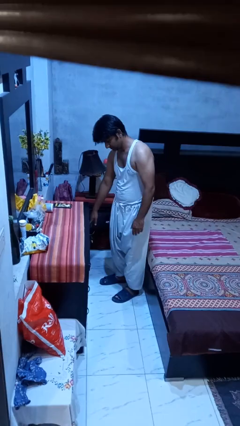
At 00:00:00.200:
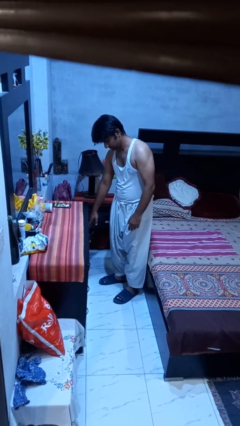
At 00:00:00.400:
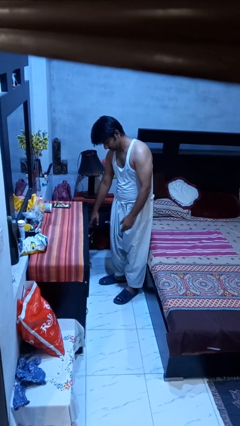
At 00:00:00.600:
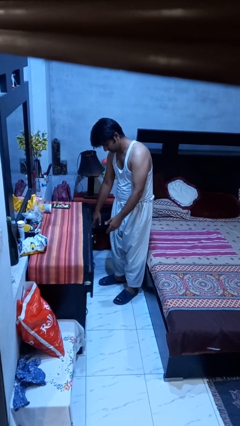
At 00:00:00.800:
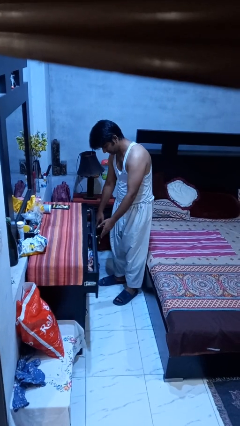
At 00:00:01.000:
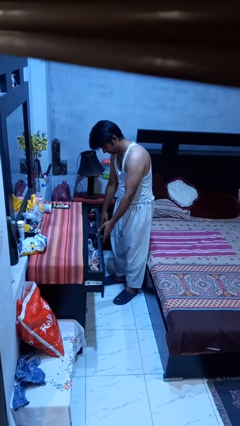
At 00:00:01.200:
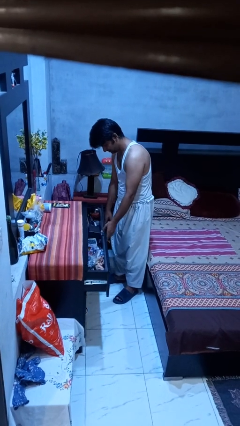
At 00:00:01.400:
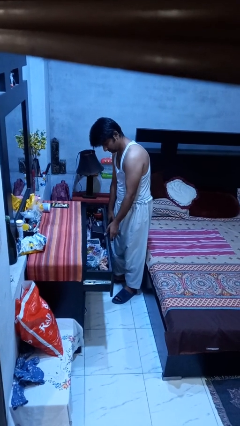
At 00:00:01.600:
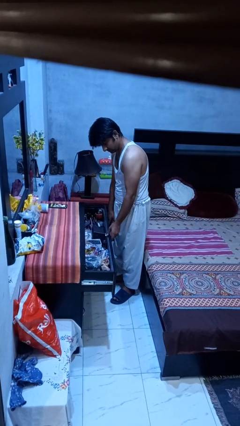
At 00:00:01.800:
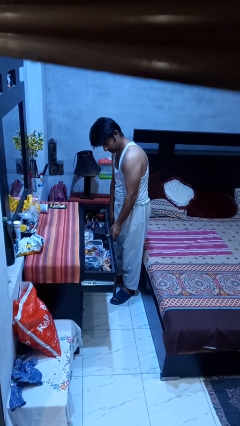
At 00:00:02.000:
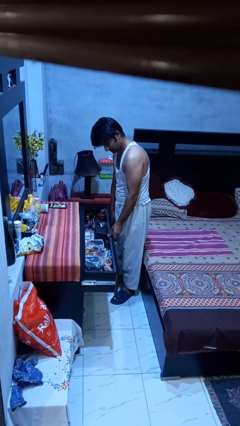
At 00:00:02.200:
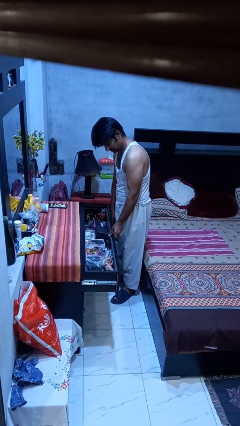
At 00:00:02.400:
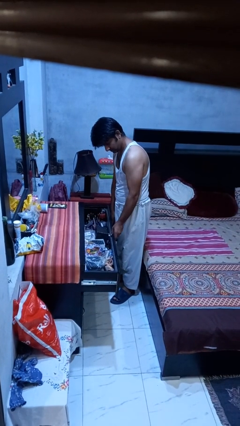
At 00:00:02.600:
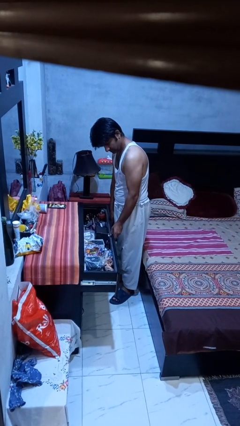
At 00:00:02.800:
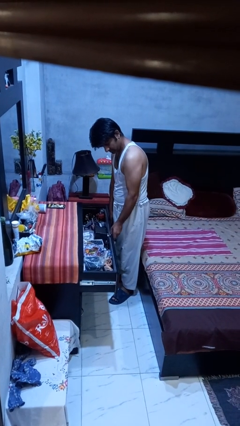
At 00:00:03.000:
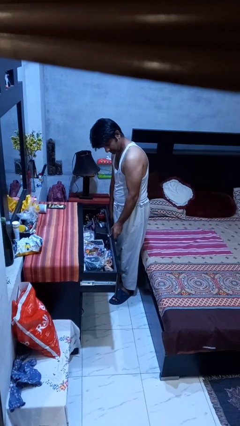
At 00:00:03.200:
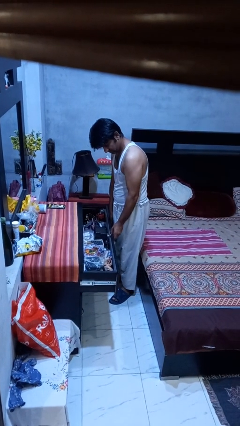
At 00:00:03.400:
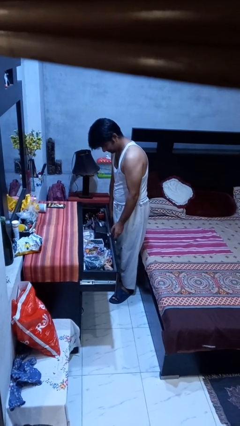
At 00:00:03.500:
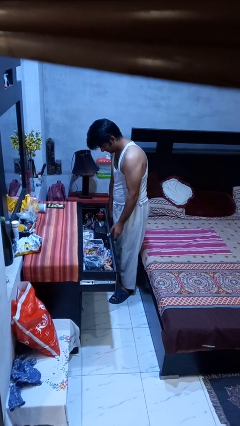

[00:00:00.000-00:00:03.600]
person opens dresser drawer

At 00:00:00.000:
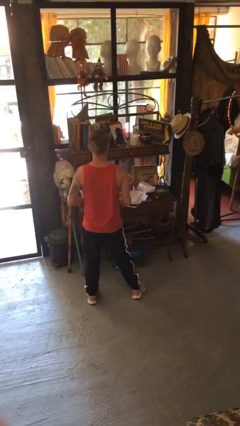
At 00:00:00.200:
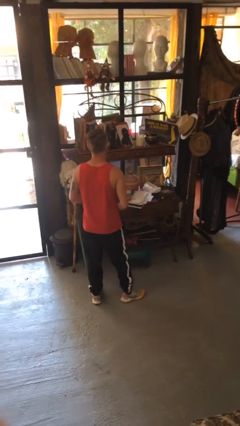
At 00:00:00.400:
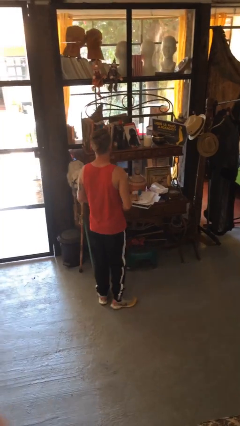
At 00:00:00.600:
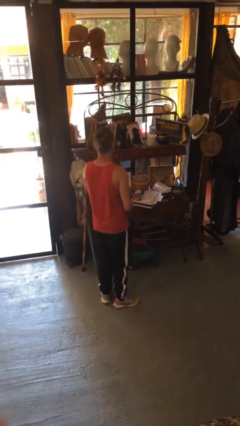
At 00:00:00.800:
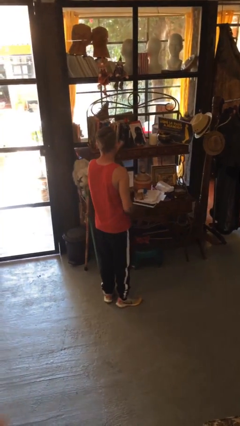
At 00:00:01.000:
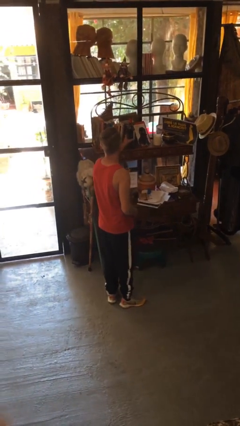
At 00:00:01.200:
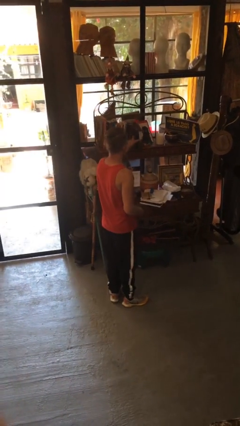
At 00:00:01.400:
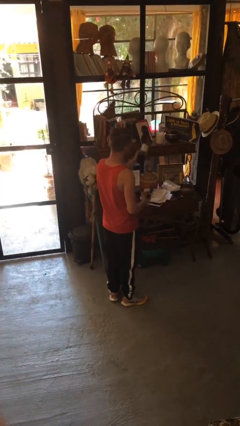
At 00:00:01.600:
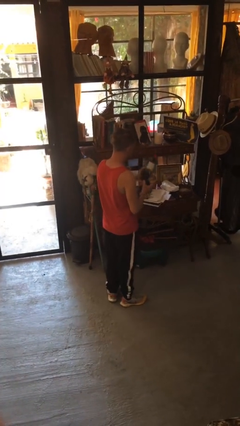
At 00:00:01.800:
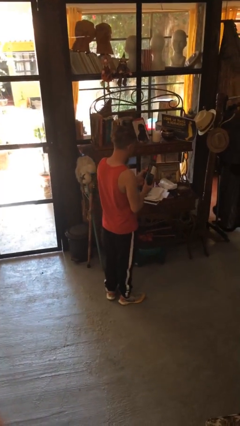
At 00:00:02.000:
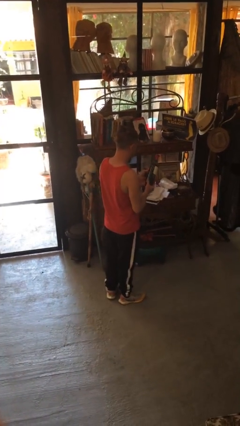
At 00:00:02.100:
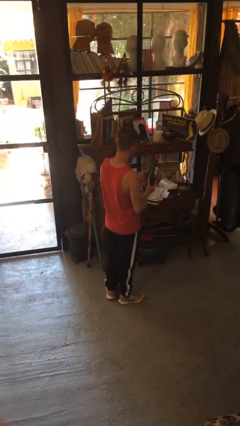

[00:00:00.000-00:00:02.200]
person picks up object from shelf

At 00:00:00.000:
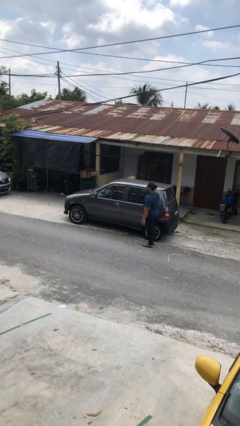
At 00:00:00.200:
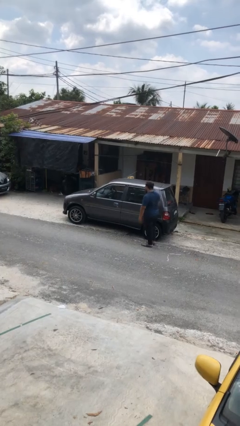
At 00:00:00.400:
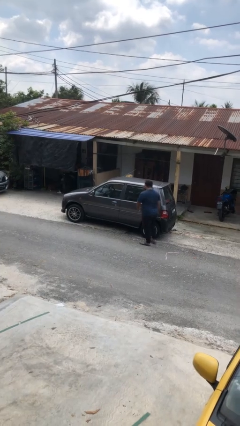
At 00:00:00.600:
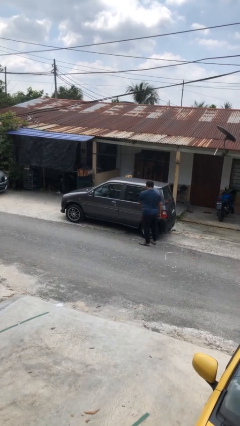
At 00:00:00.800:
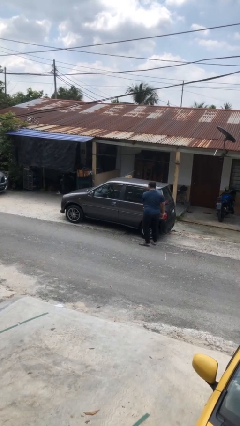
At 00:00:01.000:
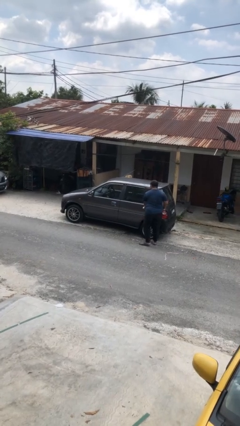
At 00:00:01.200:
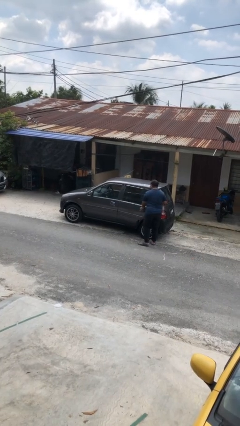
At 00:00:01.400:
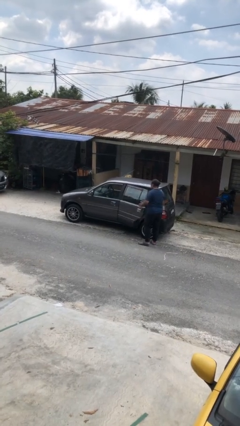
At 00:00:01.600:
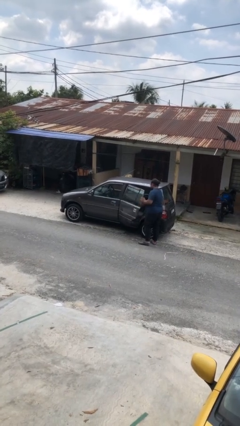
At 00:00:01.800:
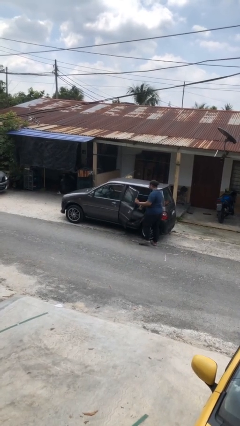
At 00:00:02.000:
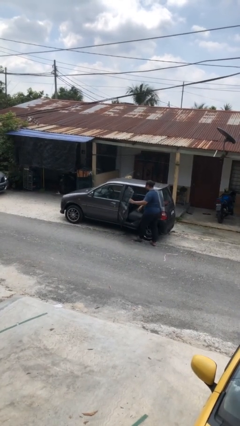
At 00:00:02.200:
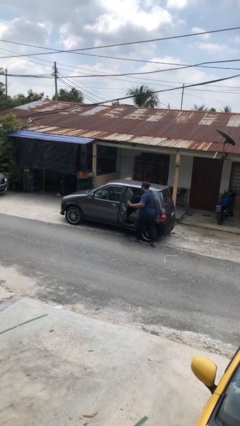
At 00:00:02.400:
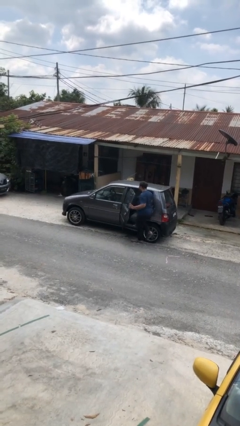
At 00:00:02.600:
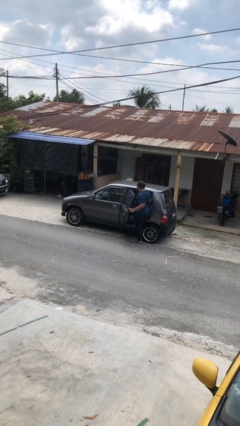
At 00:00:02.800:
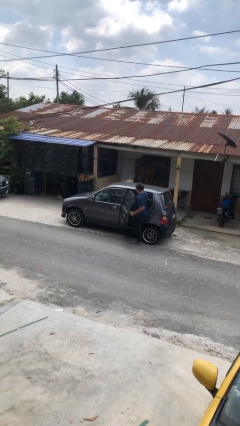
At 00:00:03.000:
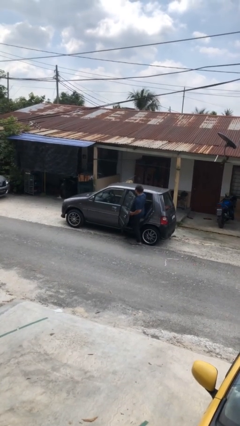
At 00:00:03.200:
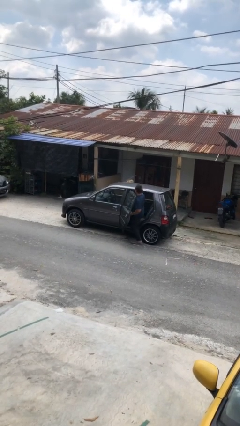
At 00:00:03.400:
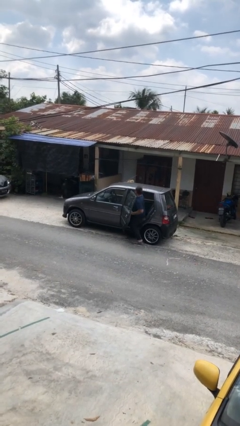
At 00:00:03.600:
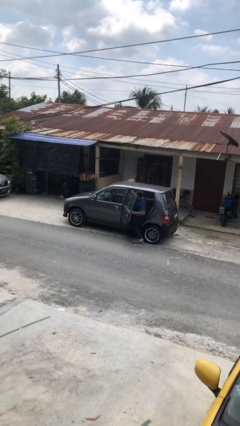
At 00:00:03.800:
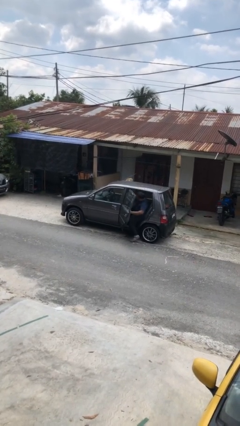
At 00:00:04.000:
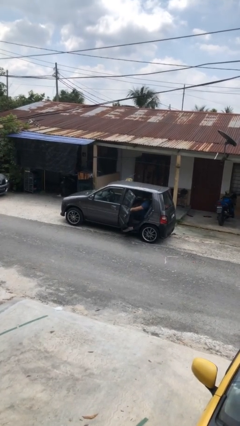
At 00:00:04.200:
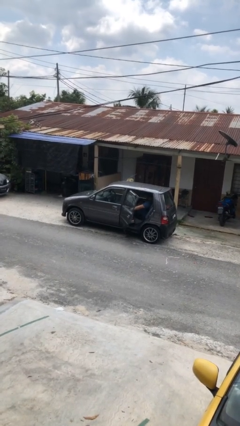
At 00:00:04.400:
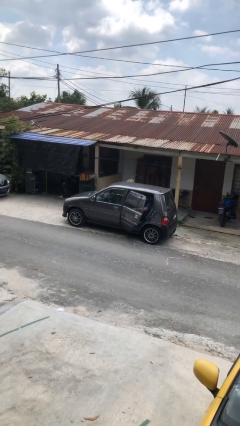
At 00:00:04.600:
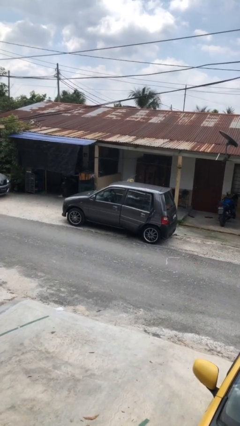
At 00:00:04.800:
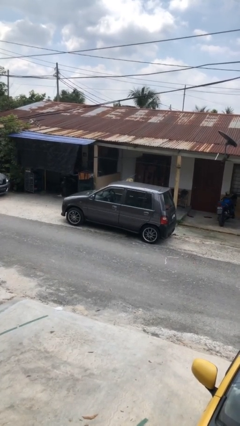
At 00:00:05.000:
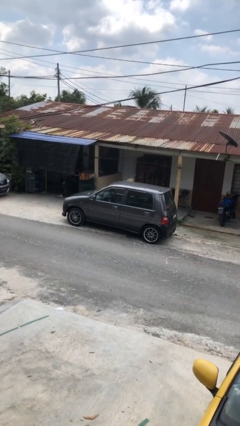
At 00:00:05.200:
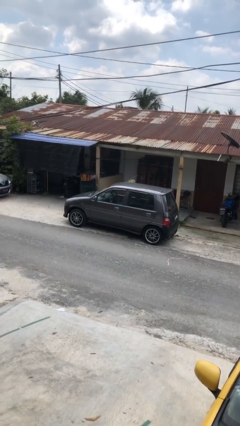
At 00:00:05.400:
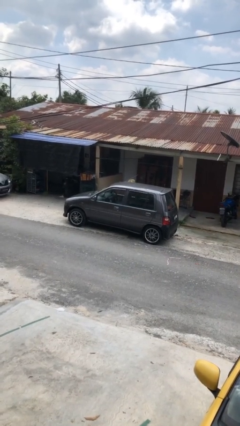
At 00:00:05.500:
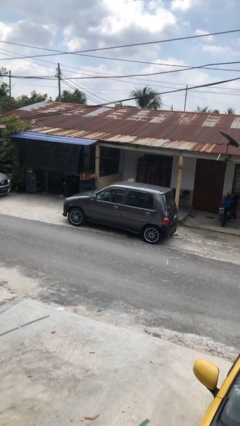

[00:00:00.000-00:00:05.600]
car picks up person

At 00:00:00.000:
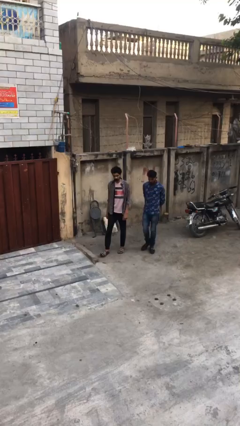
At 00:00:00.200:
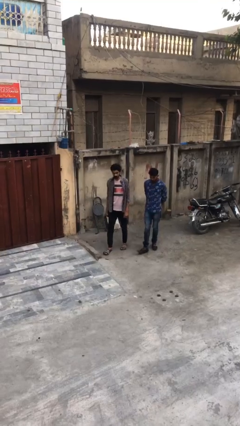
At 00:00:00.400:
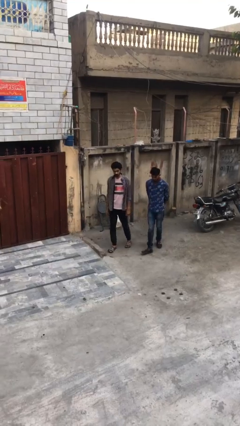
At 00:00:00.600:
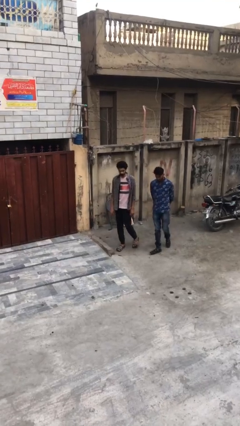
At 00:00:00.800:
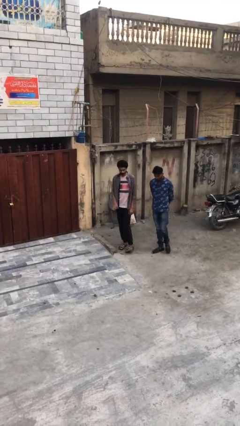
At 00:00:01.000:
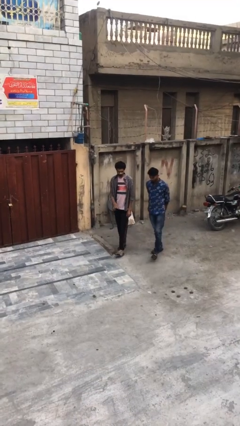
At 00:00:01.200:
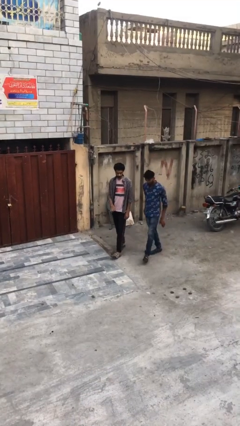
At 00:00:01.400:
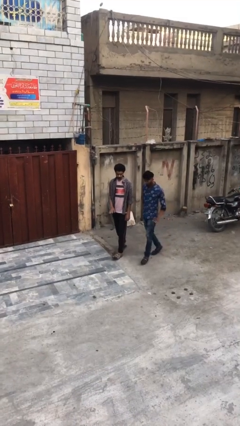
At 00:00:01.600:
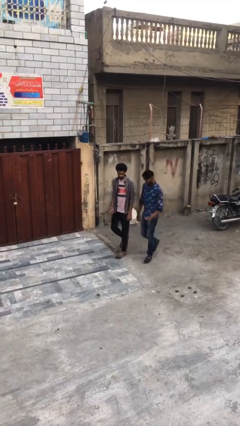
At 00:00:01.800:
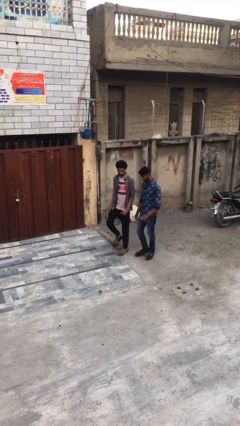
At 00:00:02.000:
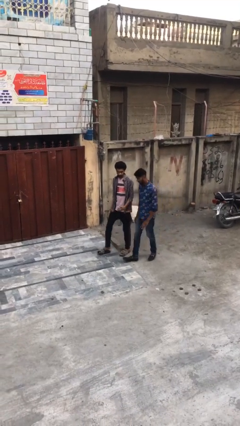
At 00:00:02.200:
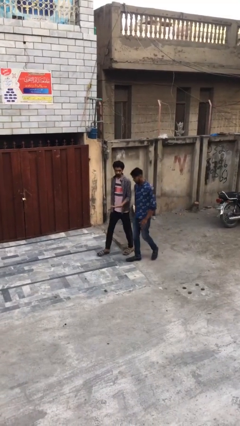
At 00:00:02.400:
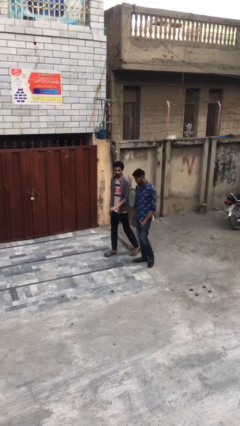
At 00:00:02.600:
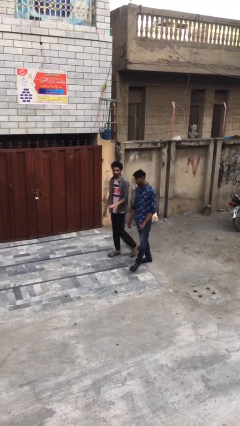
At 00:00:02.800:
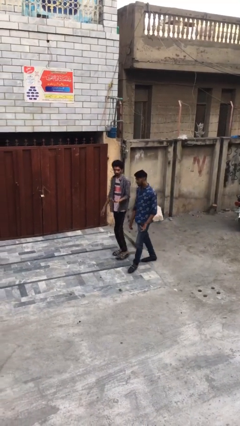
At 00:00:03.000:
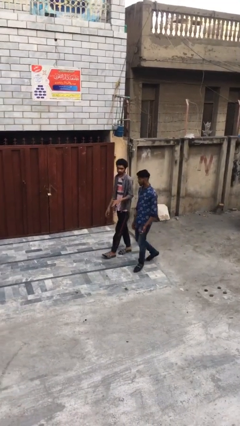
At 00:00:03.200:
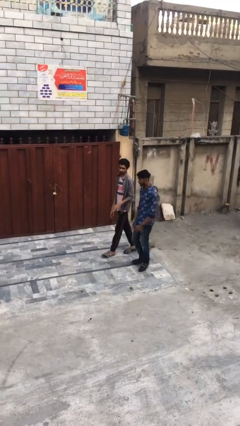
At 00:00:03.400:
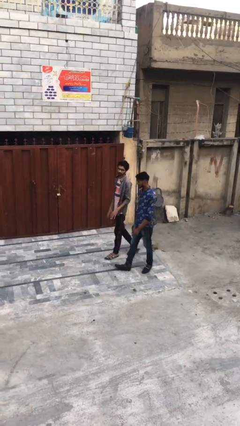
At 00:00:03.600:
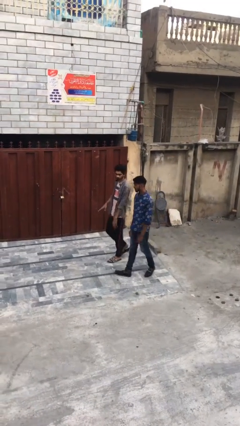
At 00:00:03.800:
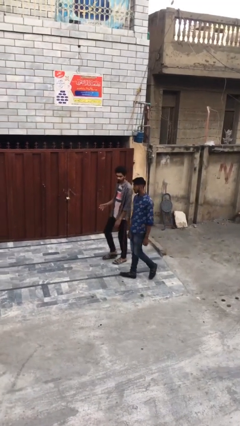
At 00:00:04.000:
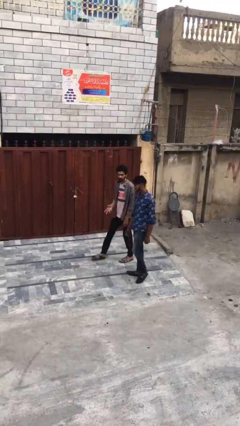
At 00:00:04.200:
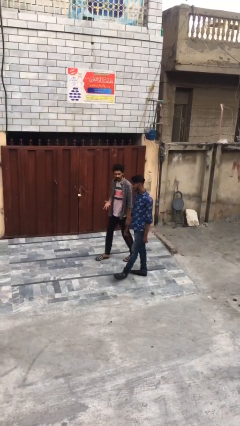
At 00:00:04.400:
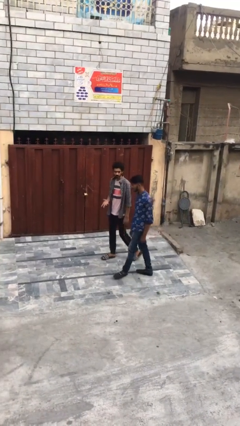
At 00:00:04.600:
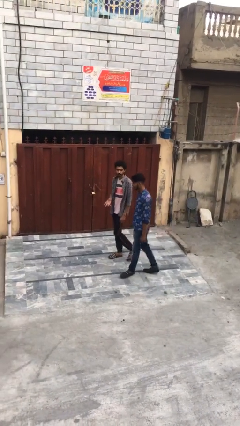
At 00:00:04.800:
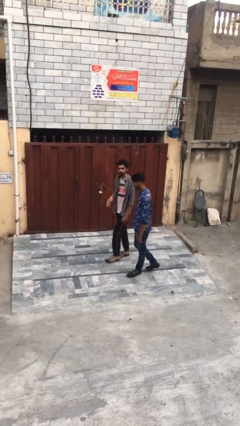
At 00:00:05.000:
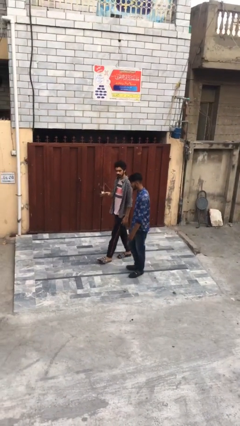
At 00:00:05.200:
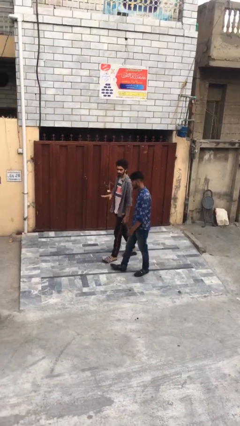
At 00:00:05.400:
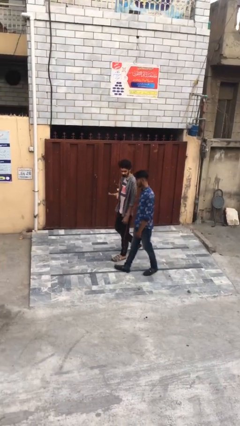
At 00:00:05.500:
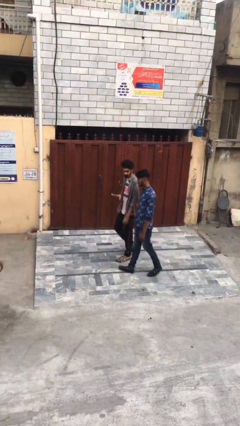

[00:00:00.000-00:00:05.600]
person talks to person

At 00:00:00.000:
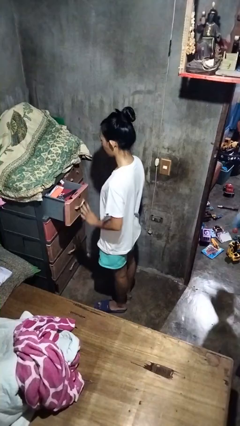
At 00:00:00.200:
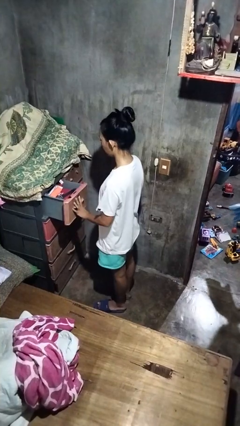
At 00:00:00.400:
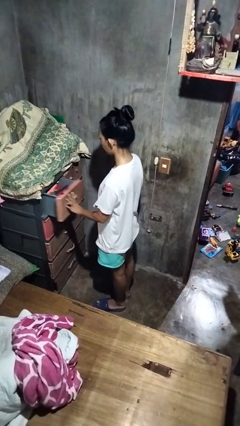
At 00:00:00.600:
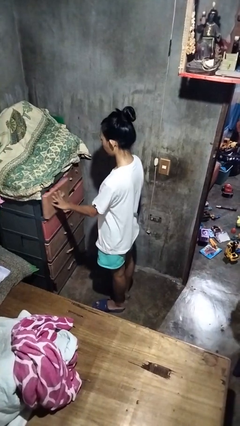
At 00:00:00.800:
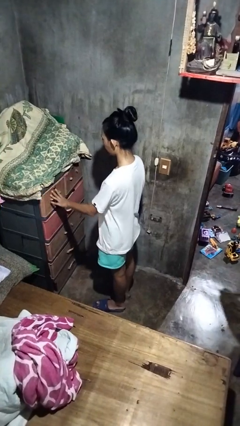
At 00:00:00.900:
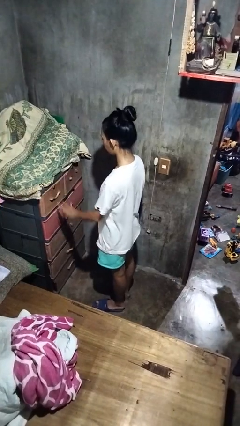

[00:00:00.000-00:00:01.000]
person closes dresser drawer
